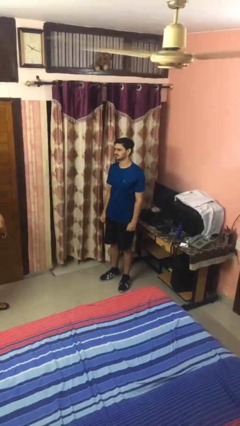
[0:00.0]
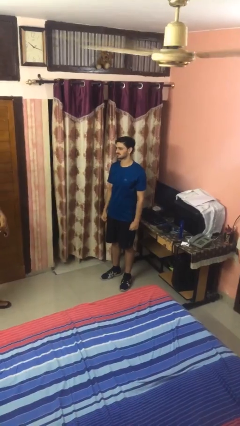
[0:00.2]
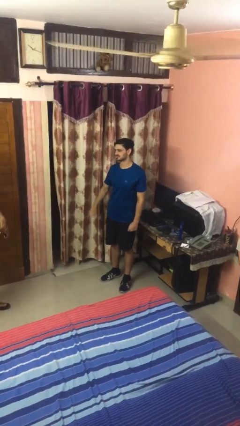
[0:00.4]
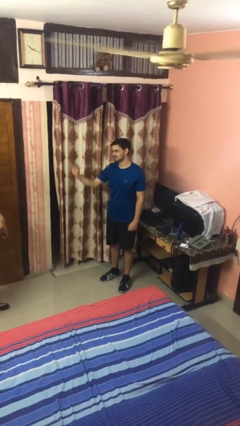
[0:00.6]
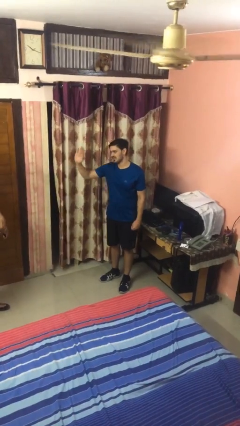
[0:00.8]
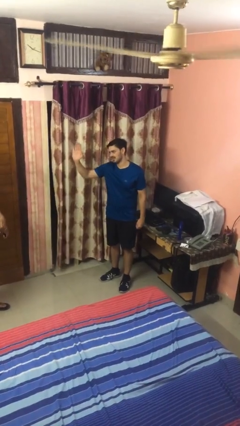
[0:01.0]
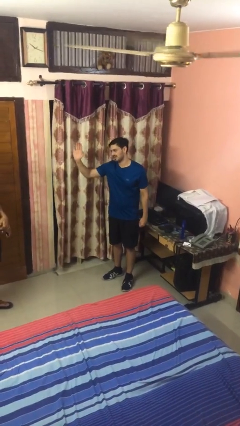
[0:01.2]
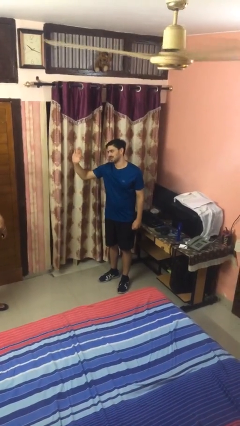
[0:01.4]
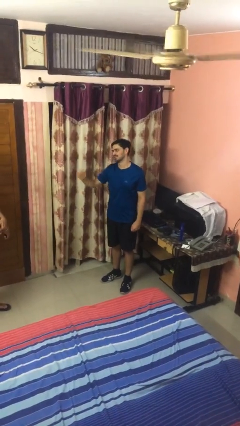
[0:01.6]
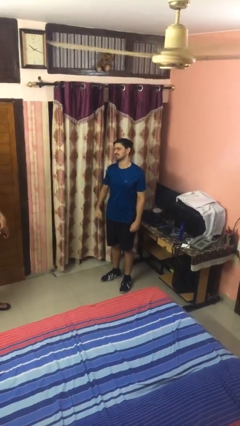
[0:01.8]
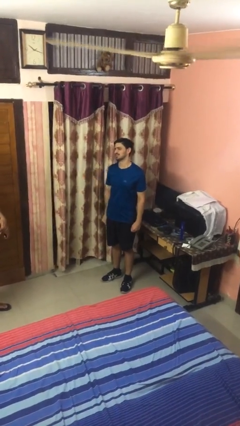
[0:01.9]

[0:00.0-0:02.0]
person waves at person

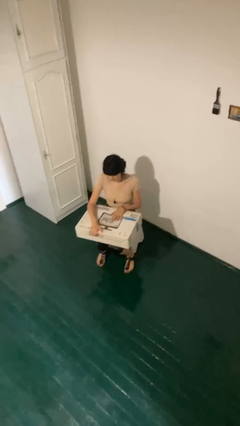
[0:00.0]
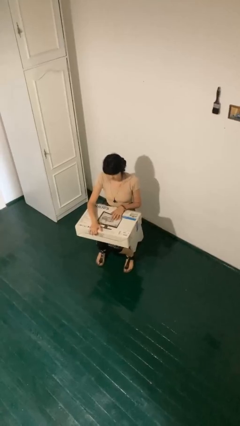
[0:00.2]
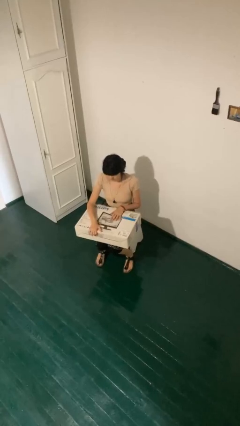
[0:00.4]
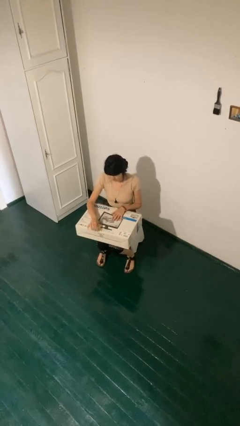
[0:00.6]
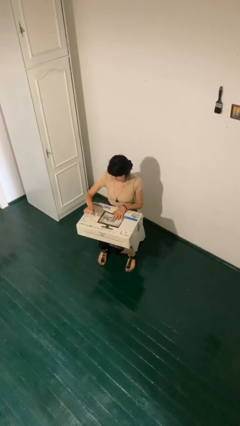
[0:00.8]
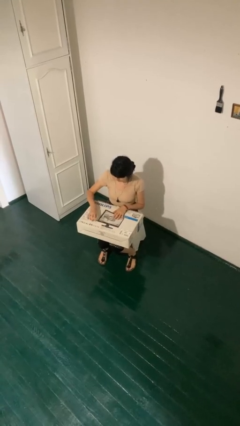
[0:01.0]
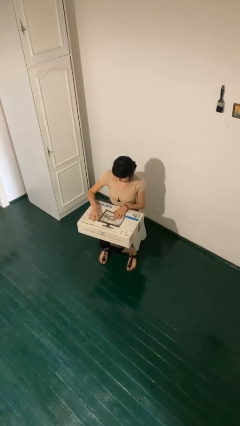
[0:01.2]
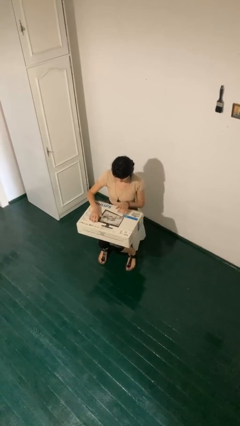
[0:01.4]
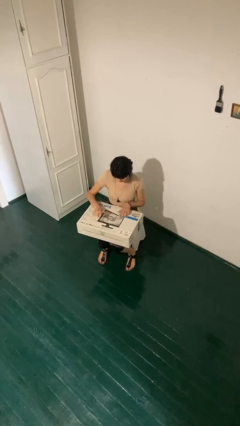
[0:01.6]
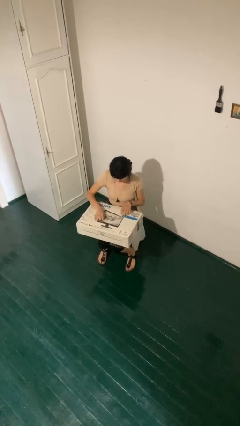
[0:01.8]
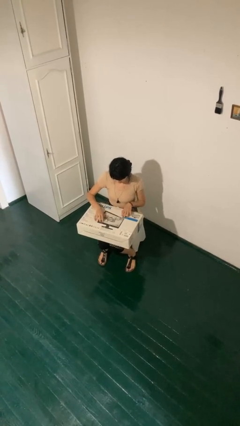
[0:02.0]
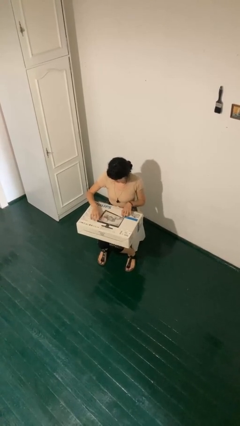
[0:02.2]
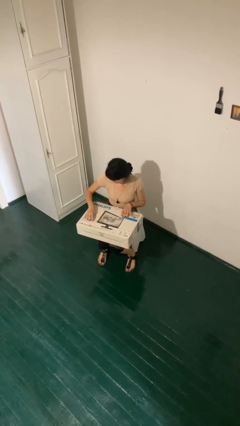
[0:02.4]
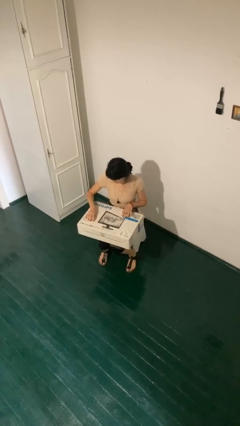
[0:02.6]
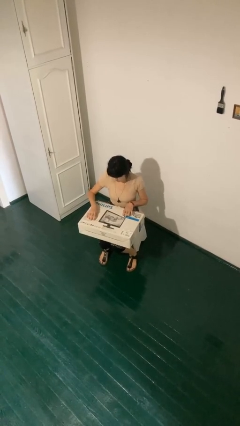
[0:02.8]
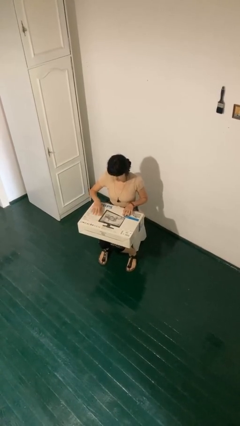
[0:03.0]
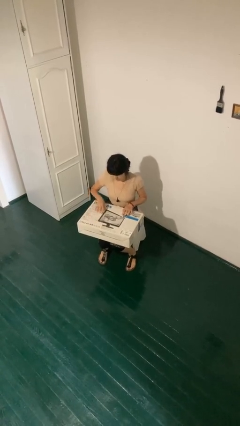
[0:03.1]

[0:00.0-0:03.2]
person taps object with finger

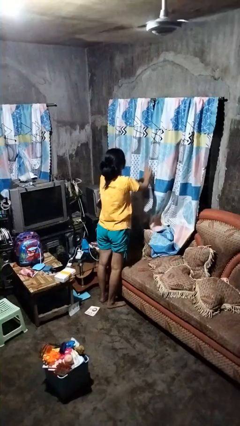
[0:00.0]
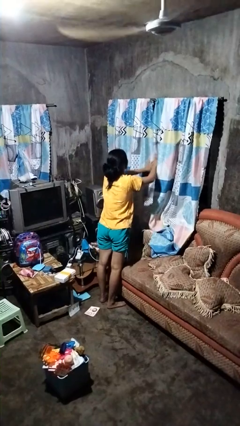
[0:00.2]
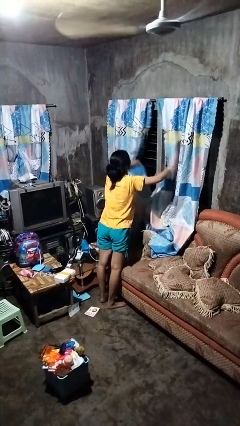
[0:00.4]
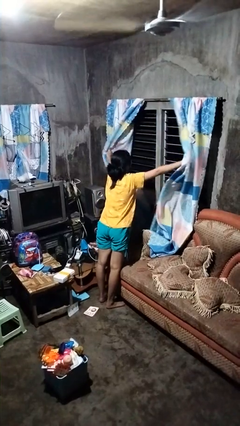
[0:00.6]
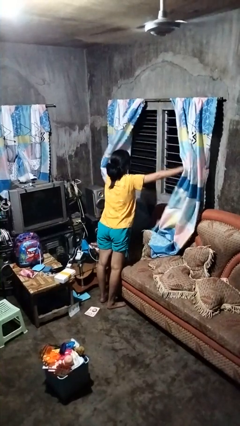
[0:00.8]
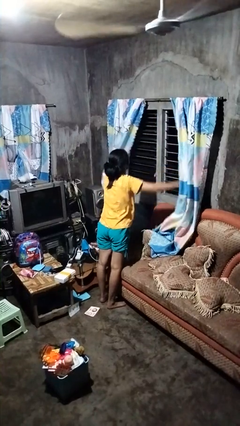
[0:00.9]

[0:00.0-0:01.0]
person opens curtains

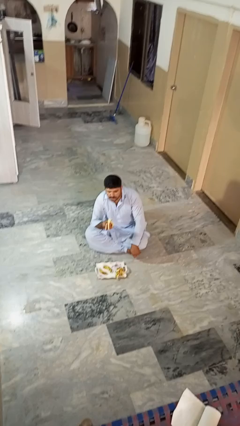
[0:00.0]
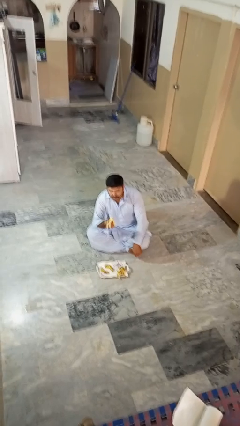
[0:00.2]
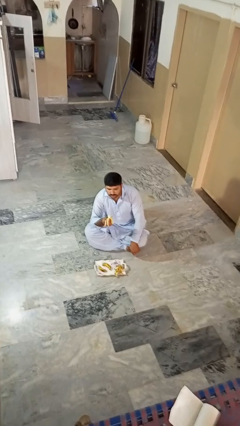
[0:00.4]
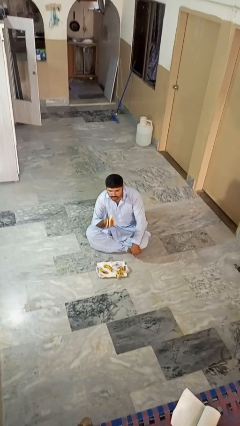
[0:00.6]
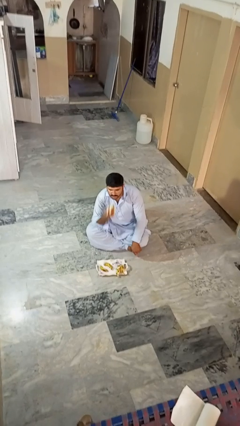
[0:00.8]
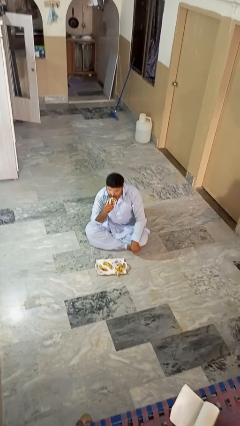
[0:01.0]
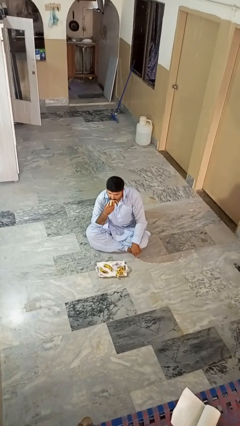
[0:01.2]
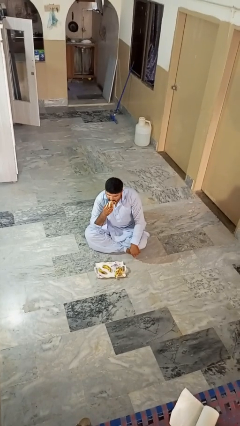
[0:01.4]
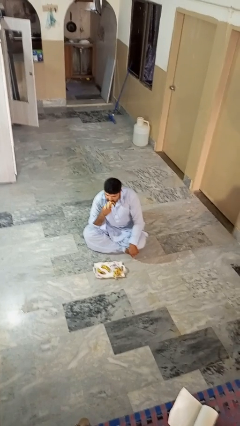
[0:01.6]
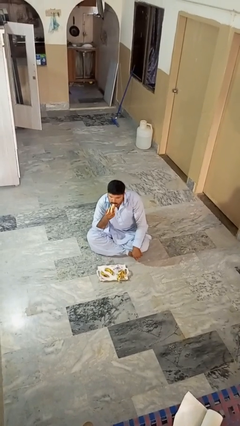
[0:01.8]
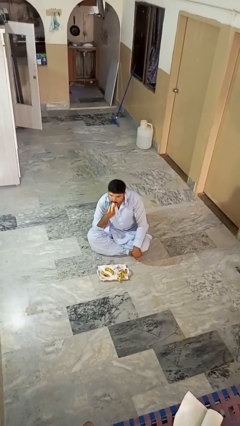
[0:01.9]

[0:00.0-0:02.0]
person eats banana

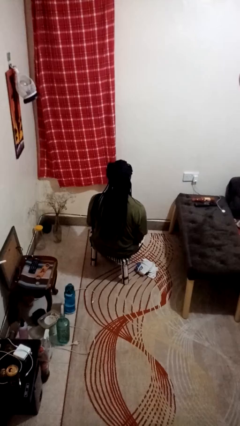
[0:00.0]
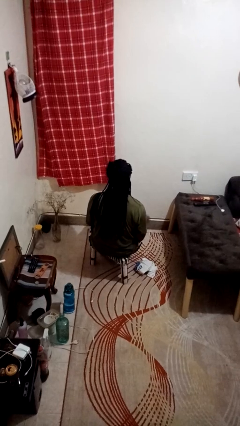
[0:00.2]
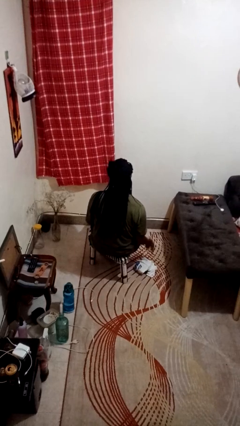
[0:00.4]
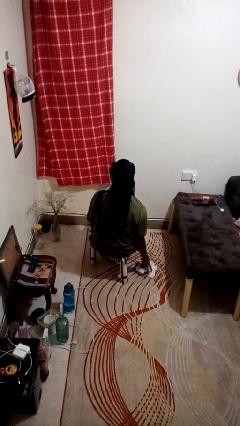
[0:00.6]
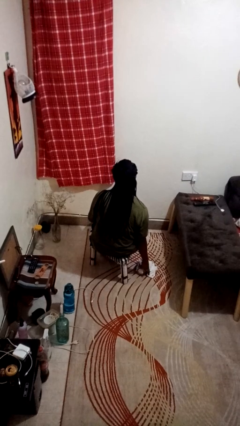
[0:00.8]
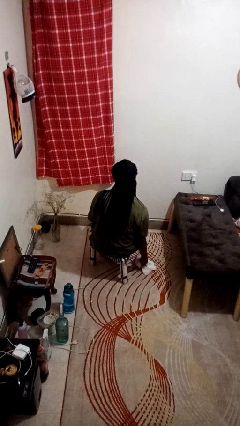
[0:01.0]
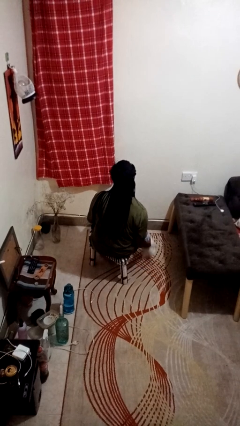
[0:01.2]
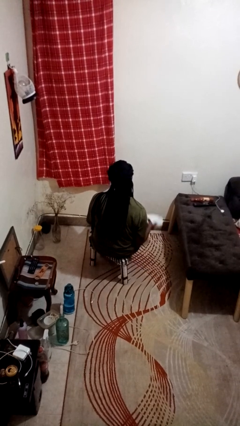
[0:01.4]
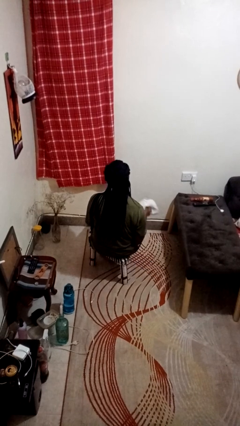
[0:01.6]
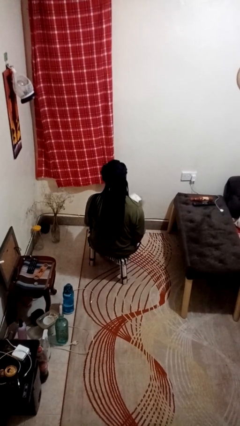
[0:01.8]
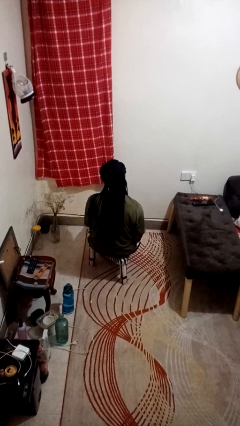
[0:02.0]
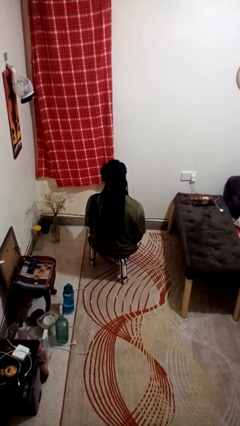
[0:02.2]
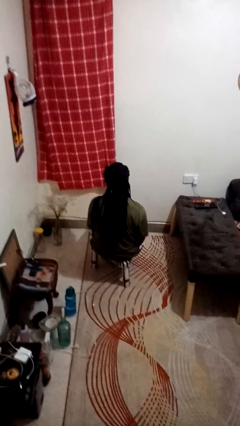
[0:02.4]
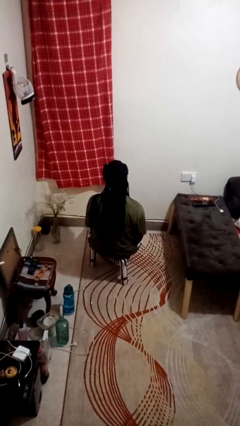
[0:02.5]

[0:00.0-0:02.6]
person picks up object from floor

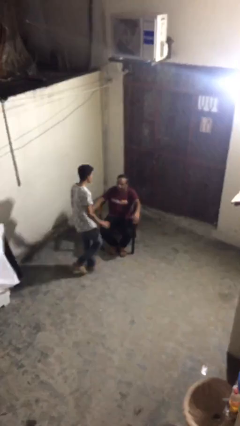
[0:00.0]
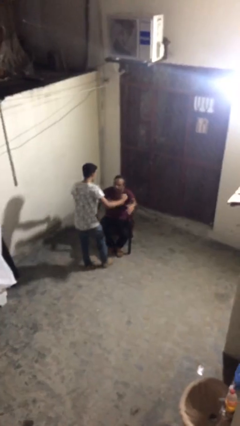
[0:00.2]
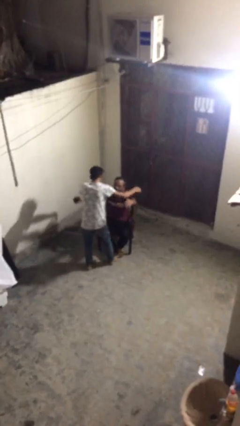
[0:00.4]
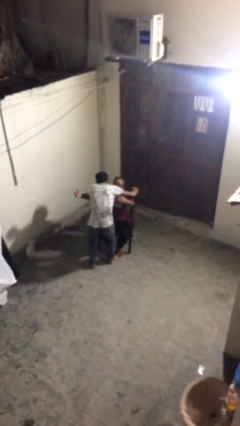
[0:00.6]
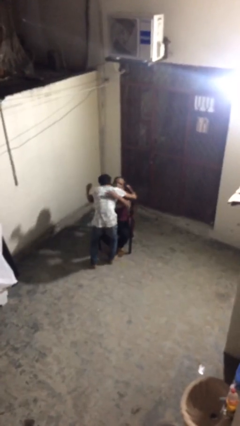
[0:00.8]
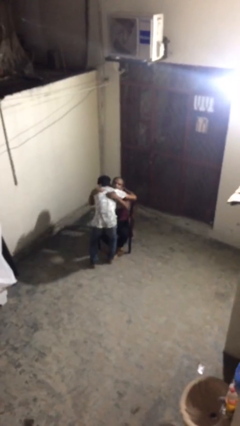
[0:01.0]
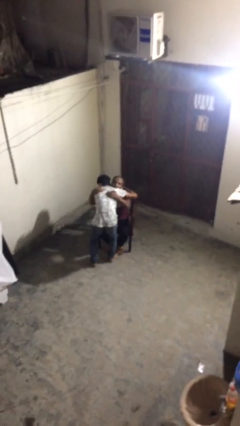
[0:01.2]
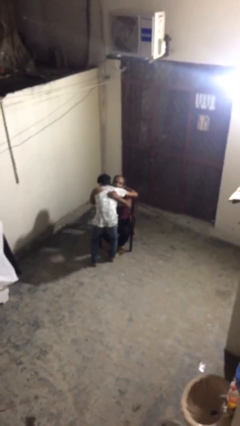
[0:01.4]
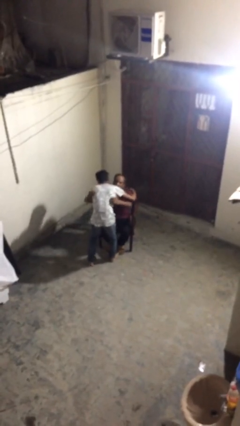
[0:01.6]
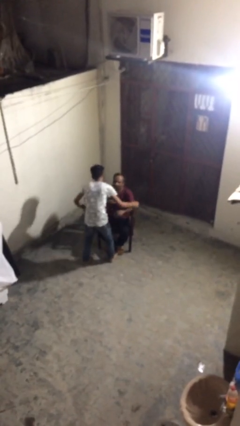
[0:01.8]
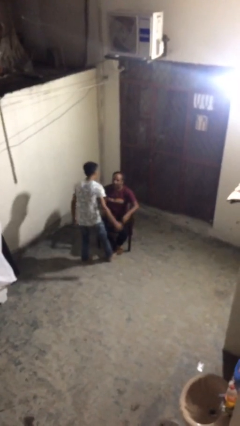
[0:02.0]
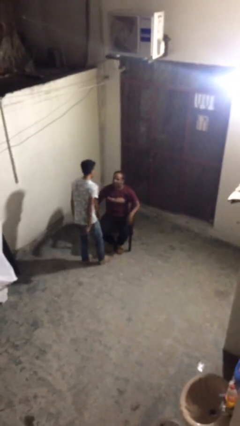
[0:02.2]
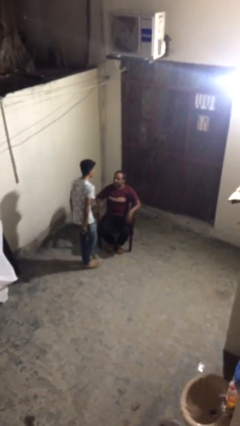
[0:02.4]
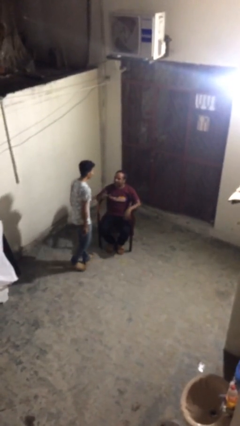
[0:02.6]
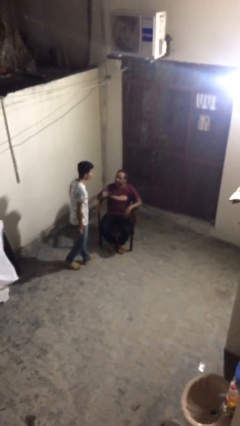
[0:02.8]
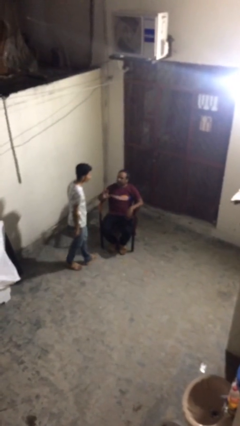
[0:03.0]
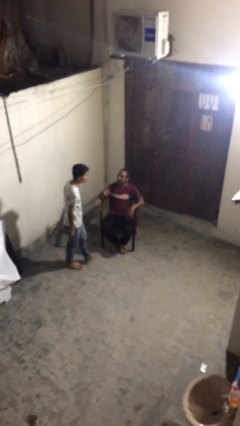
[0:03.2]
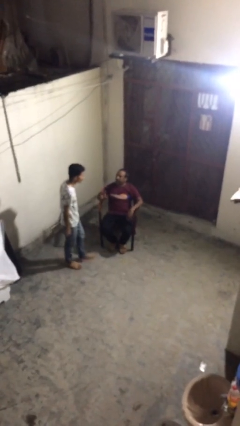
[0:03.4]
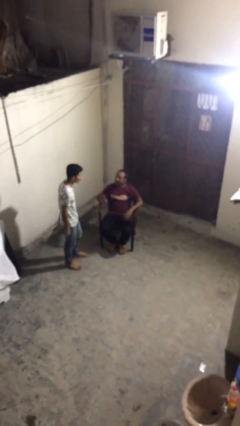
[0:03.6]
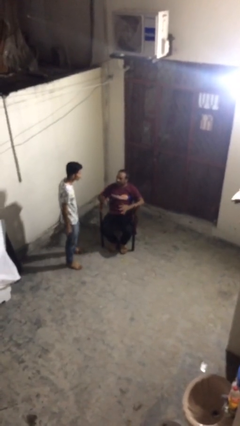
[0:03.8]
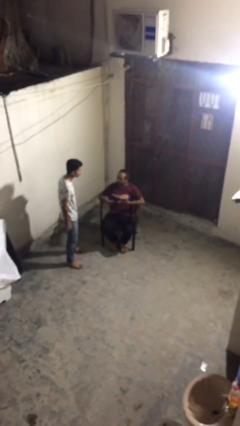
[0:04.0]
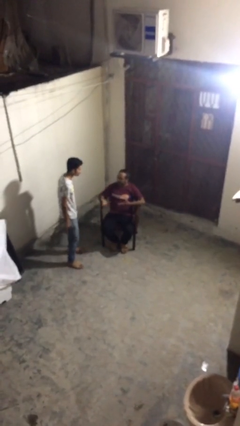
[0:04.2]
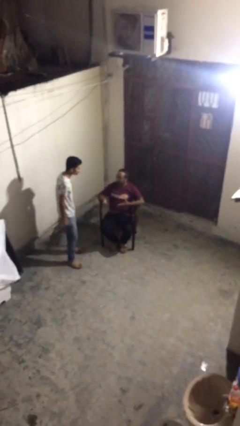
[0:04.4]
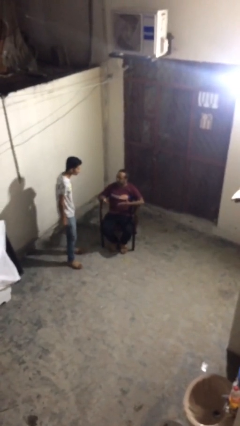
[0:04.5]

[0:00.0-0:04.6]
person embraces person

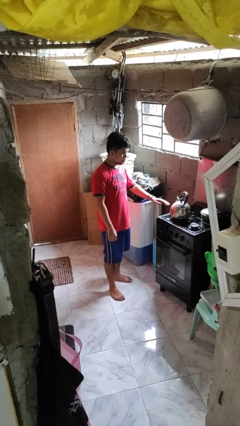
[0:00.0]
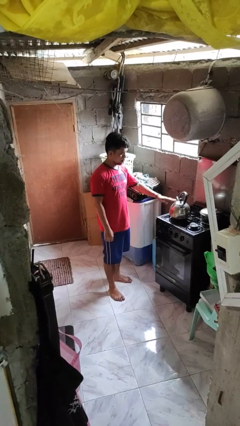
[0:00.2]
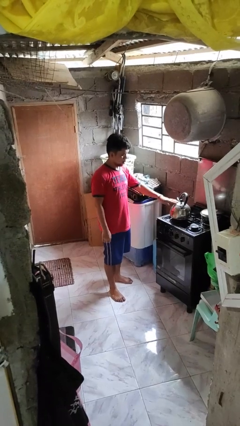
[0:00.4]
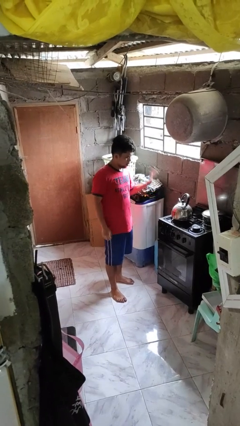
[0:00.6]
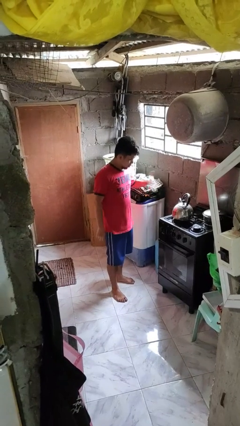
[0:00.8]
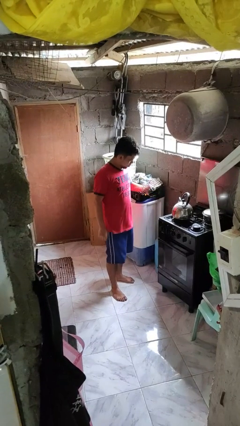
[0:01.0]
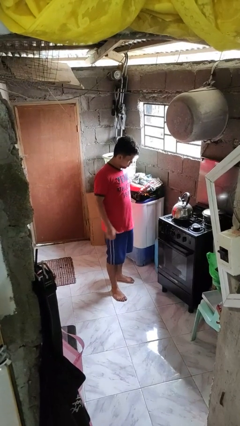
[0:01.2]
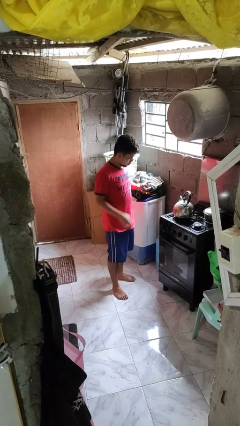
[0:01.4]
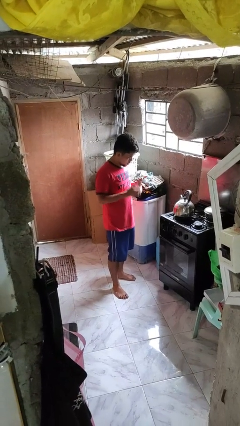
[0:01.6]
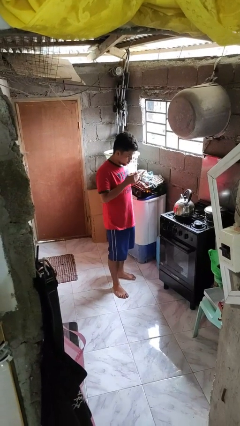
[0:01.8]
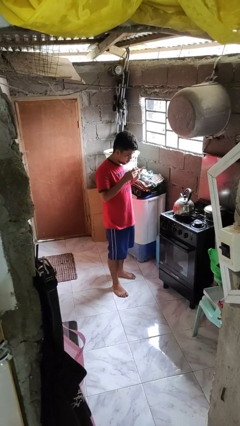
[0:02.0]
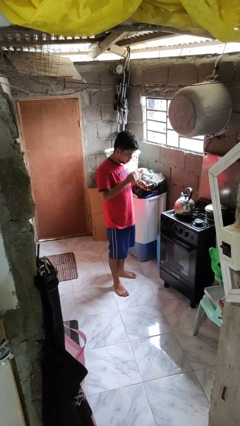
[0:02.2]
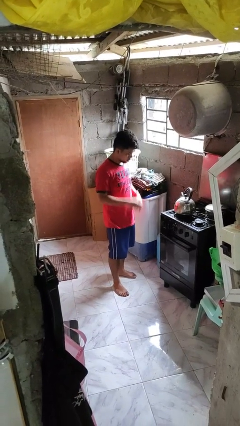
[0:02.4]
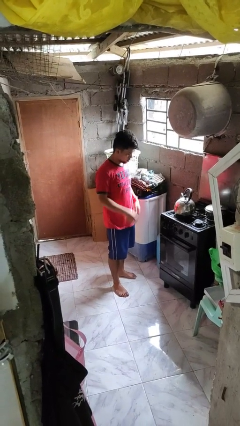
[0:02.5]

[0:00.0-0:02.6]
person burns hand
